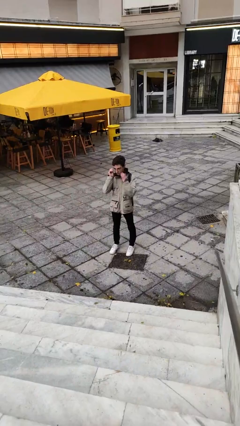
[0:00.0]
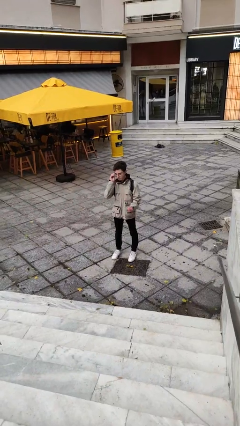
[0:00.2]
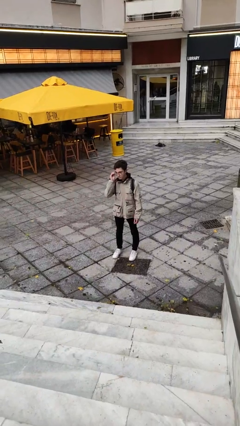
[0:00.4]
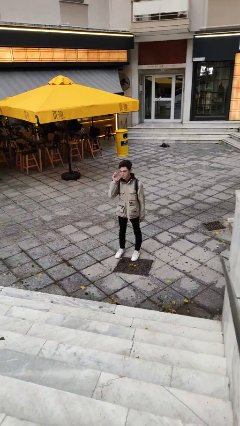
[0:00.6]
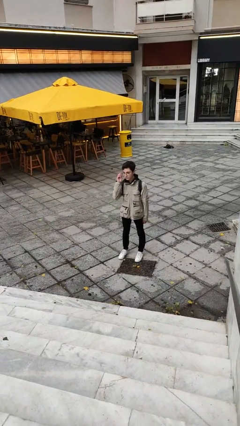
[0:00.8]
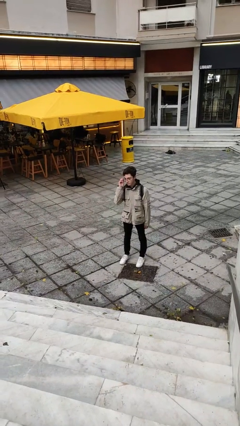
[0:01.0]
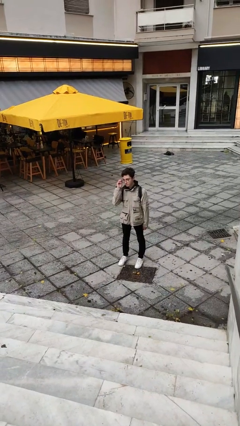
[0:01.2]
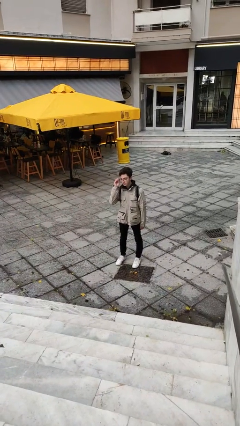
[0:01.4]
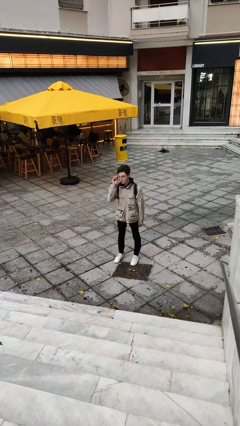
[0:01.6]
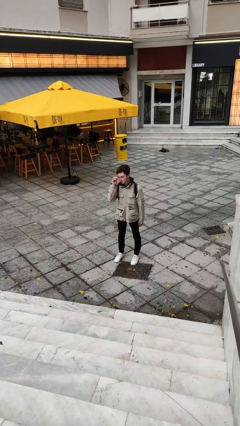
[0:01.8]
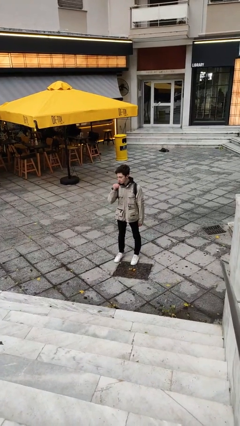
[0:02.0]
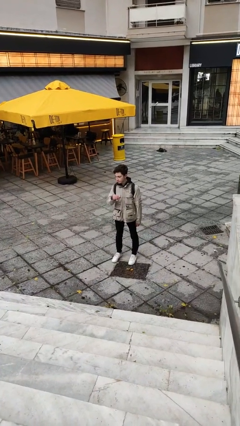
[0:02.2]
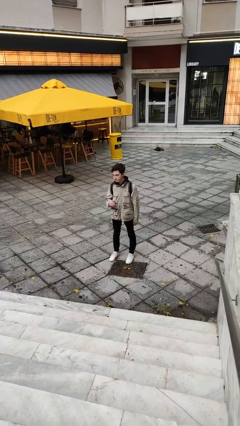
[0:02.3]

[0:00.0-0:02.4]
person puts on glasses

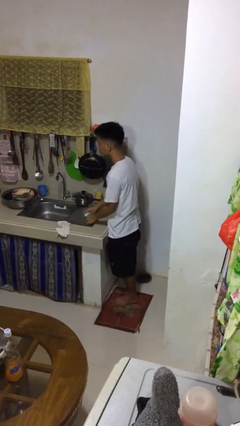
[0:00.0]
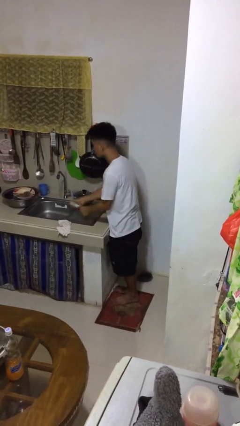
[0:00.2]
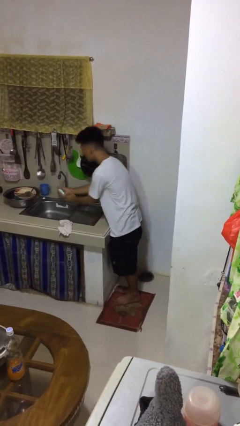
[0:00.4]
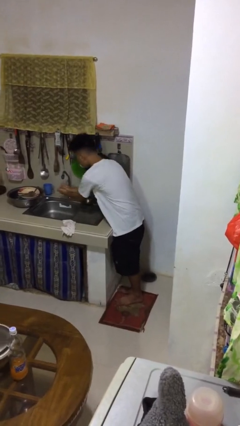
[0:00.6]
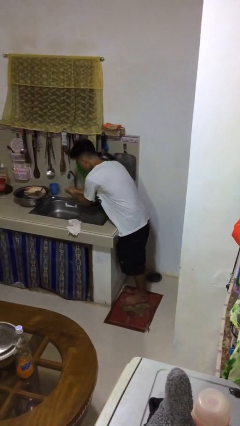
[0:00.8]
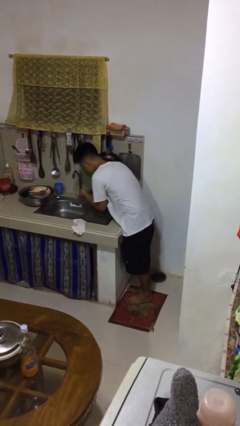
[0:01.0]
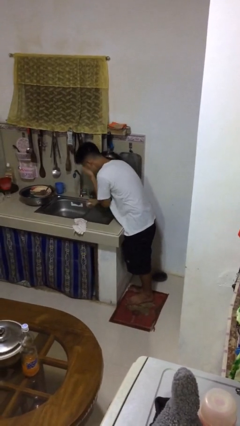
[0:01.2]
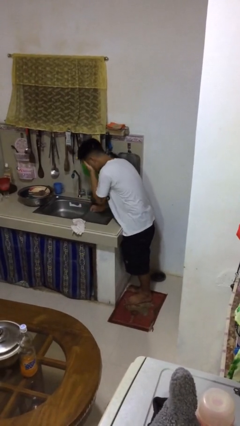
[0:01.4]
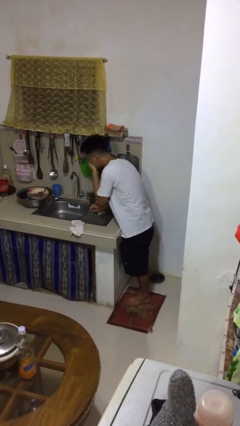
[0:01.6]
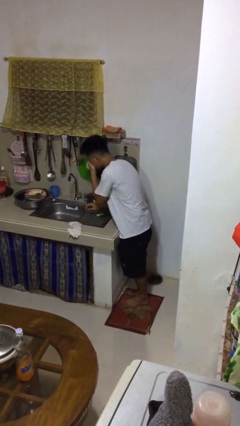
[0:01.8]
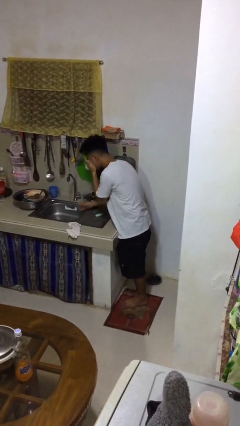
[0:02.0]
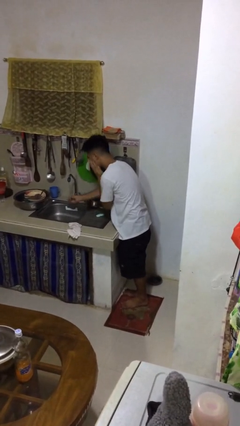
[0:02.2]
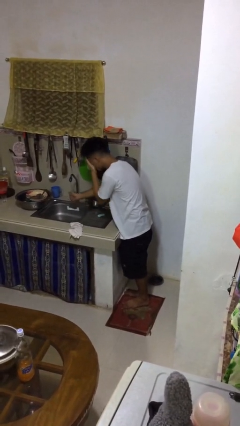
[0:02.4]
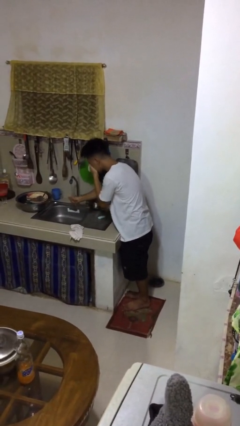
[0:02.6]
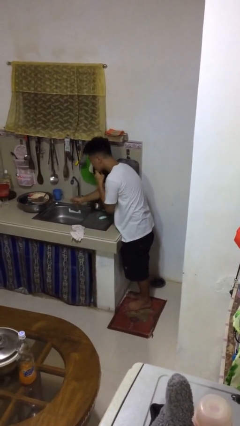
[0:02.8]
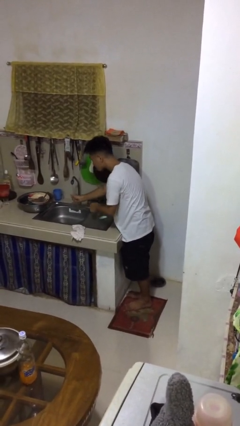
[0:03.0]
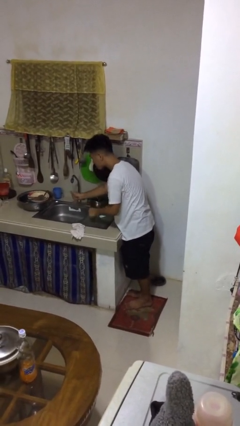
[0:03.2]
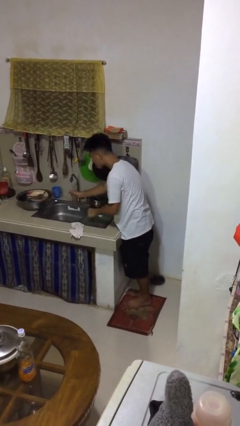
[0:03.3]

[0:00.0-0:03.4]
person washes face

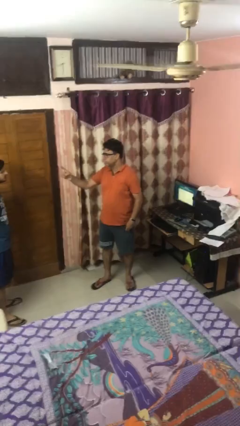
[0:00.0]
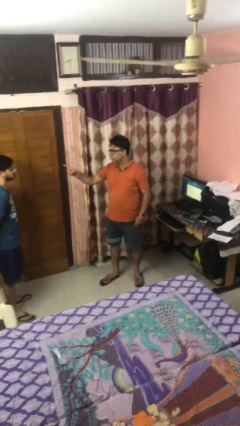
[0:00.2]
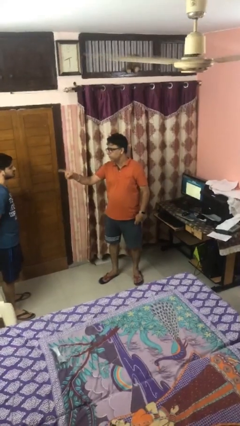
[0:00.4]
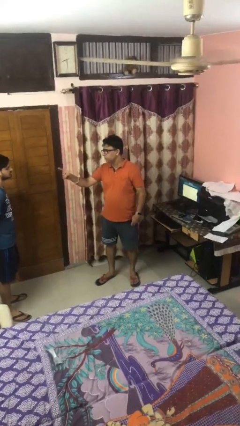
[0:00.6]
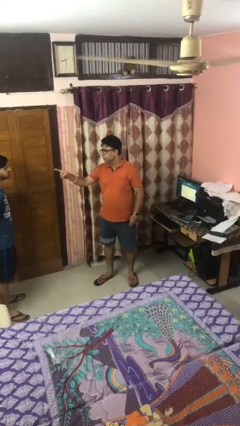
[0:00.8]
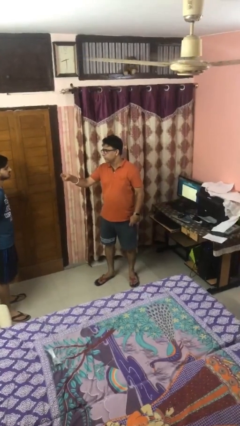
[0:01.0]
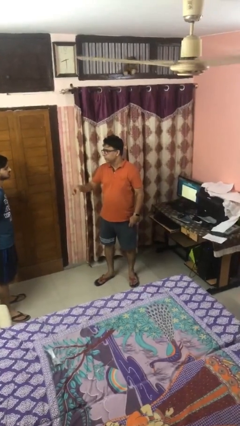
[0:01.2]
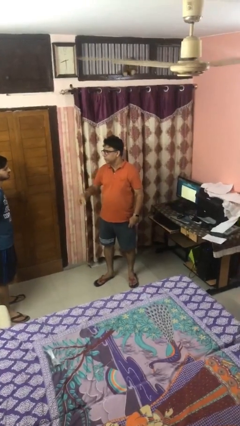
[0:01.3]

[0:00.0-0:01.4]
person points at person

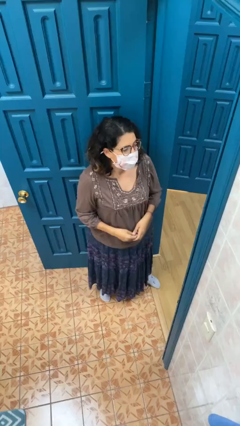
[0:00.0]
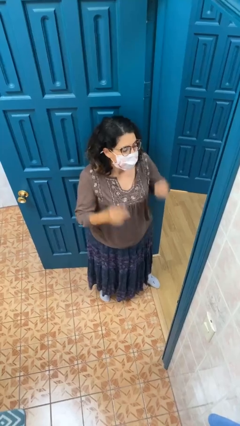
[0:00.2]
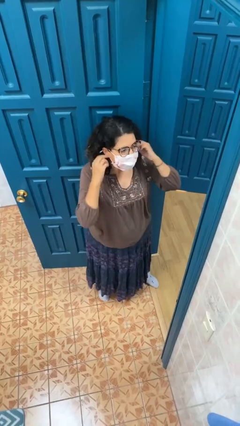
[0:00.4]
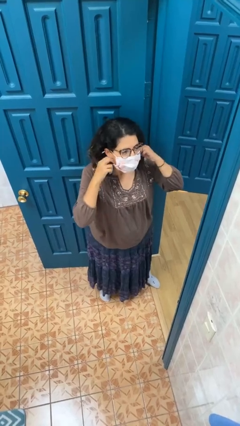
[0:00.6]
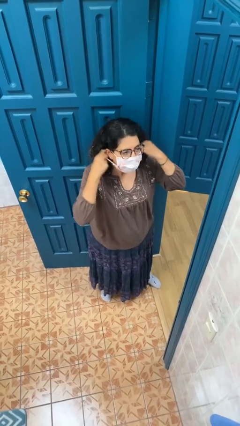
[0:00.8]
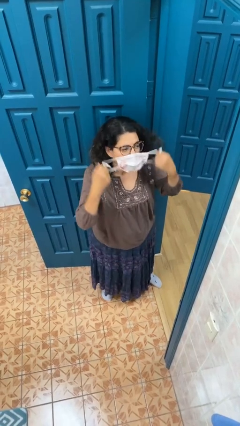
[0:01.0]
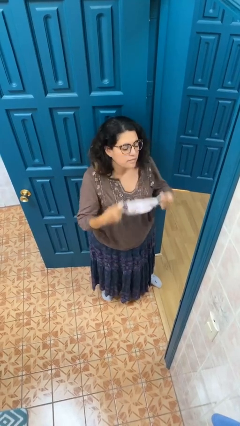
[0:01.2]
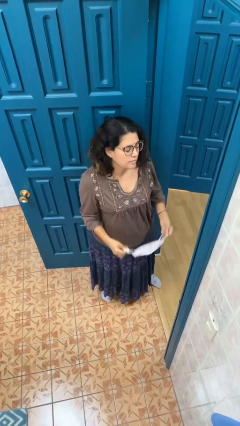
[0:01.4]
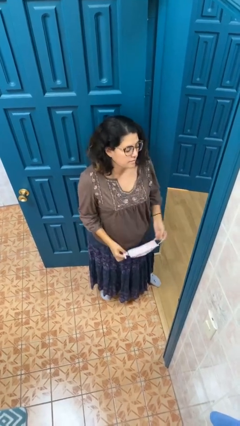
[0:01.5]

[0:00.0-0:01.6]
person takes off facemask

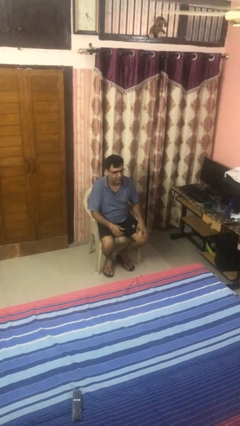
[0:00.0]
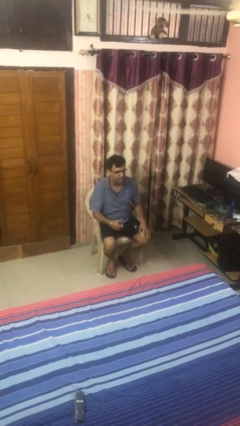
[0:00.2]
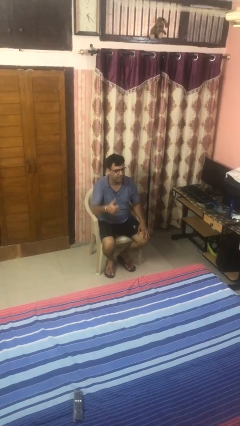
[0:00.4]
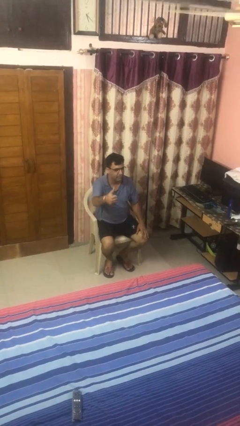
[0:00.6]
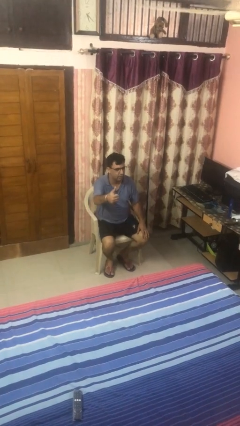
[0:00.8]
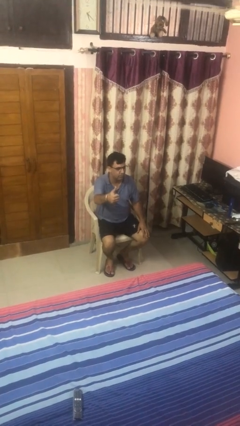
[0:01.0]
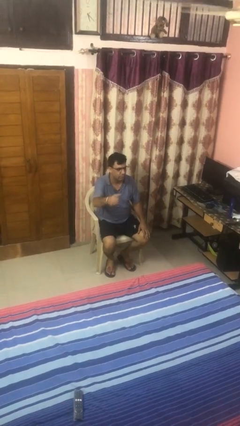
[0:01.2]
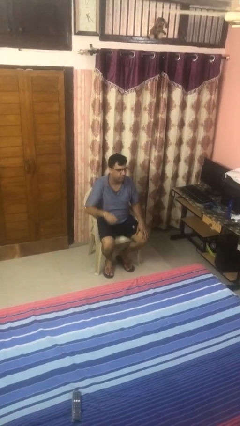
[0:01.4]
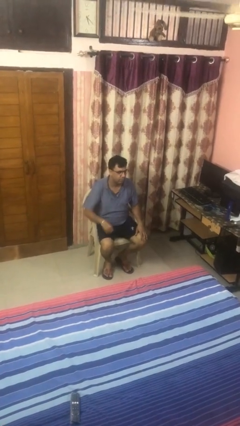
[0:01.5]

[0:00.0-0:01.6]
person gestures thumbs up

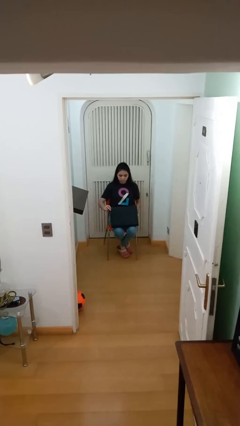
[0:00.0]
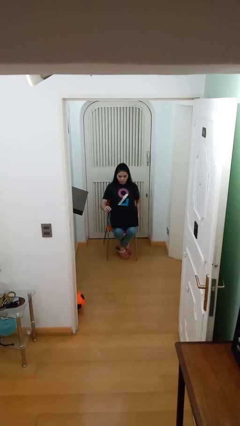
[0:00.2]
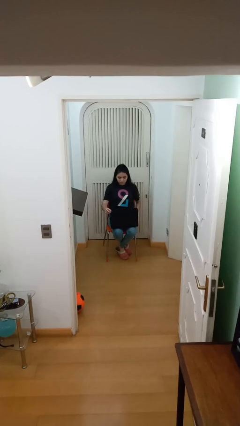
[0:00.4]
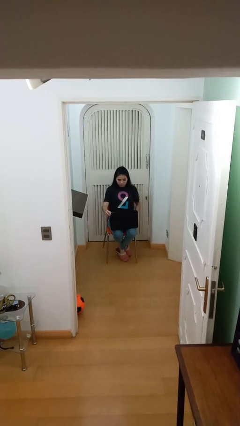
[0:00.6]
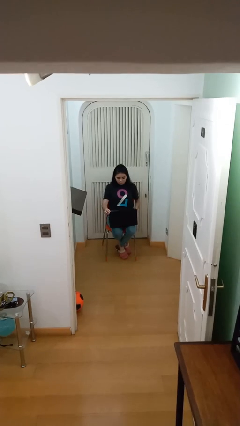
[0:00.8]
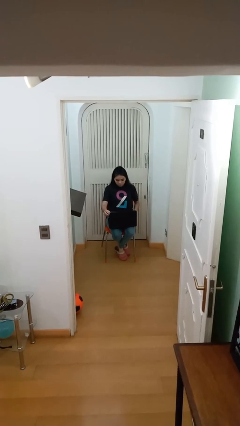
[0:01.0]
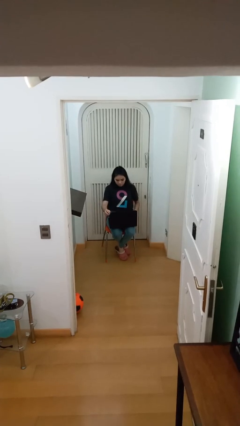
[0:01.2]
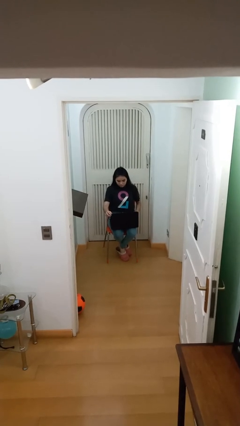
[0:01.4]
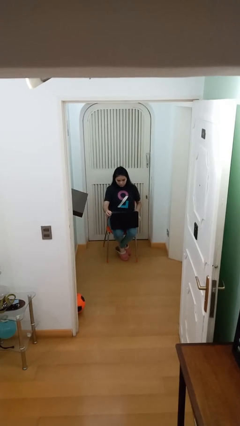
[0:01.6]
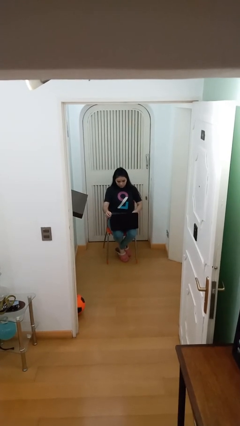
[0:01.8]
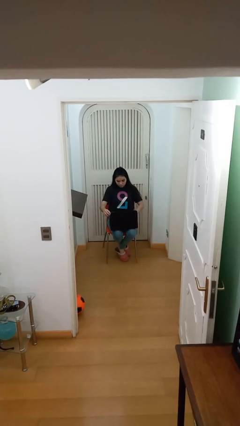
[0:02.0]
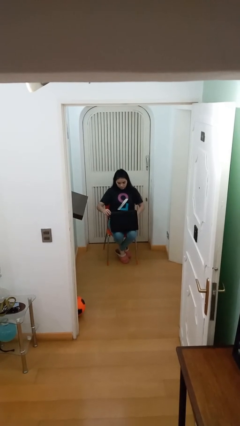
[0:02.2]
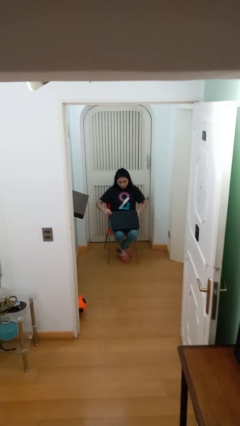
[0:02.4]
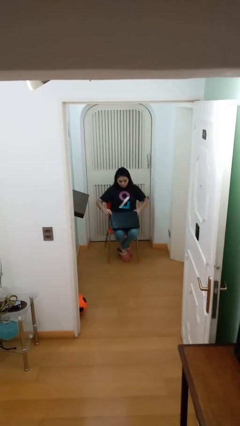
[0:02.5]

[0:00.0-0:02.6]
person interacts with laptop

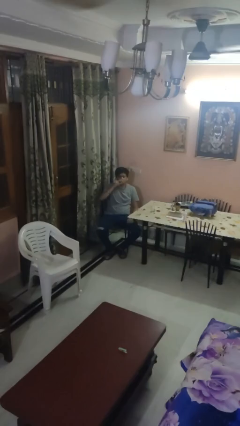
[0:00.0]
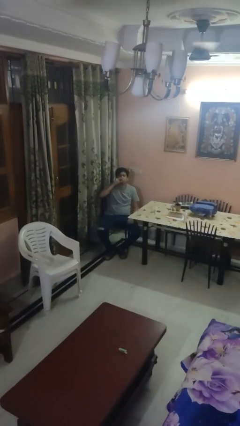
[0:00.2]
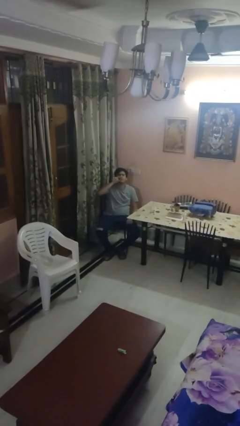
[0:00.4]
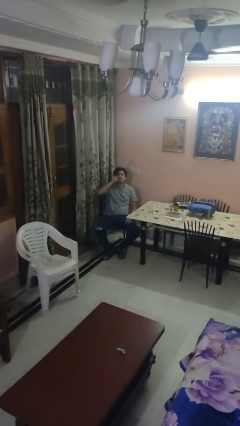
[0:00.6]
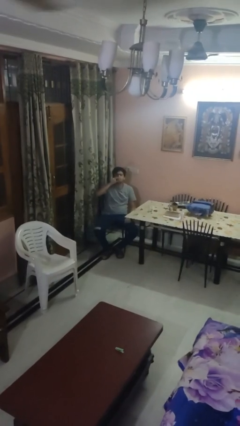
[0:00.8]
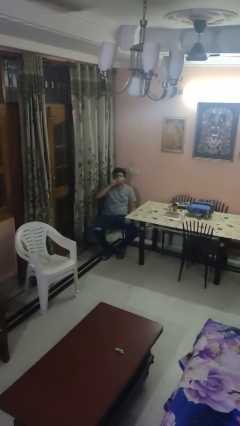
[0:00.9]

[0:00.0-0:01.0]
person drinks from shotglass

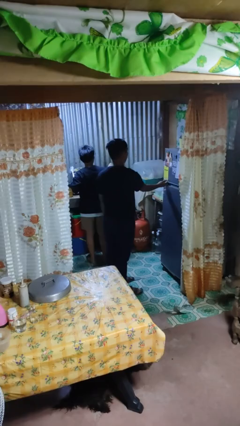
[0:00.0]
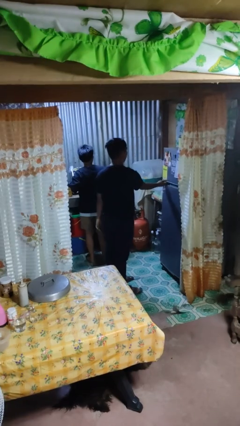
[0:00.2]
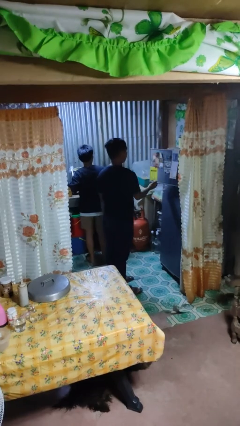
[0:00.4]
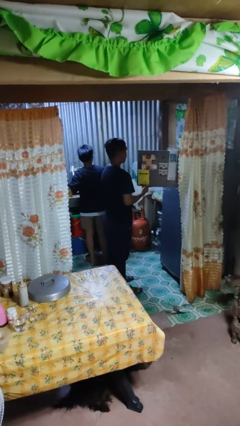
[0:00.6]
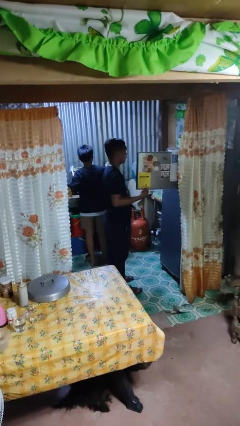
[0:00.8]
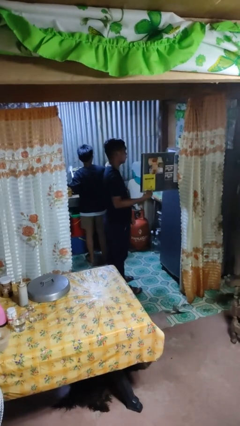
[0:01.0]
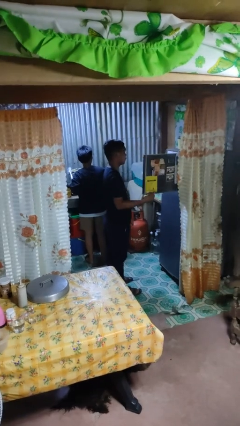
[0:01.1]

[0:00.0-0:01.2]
person opens refrigerator

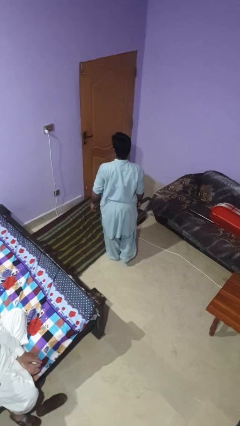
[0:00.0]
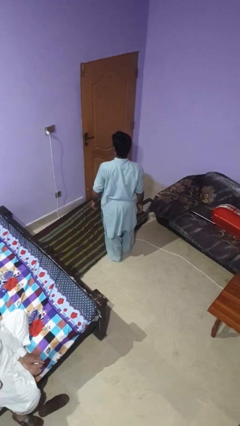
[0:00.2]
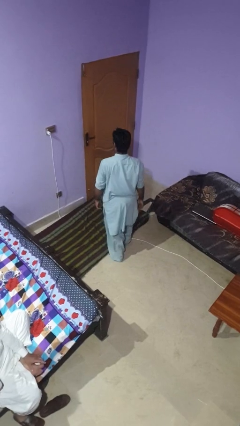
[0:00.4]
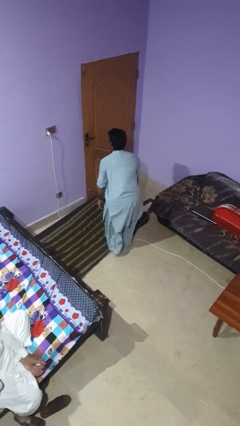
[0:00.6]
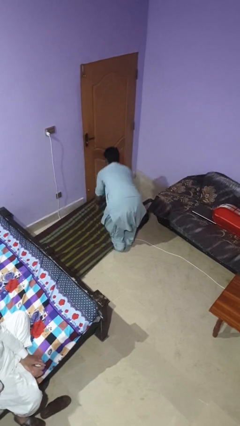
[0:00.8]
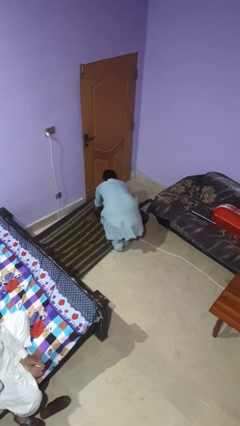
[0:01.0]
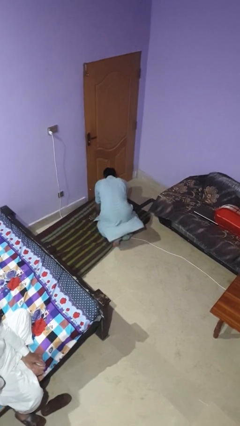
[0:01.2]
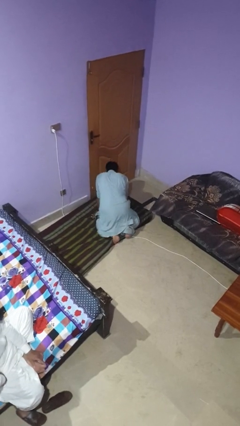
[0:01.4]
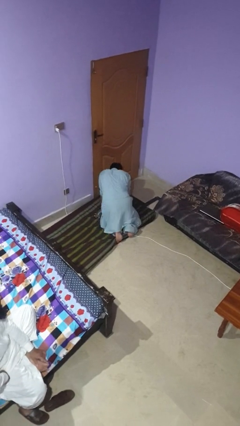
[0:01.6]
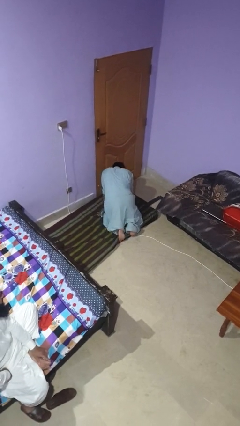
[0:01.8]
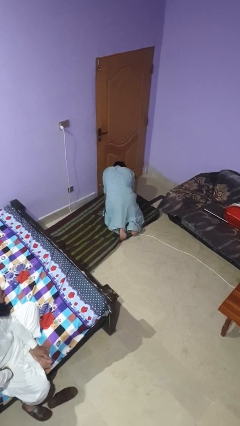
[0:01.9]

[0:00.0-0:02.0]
person trips on object on floor
